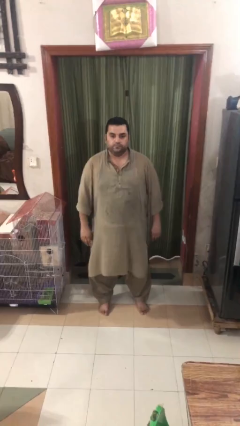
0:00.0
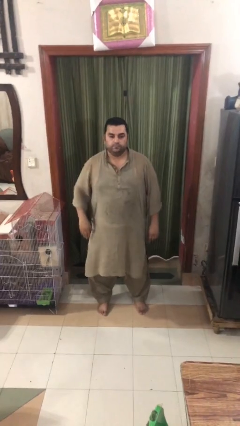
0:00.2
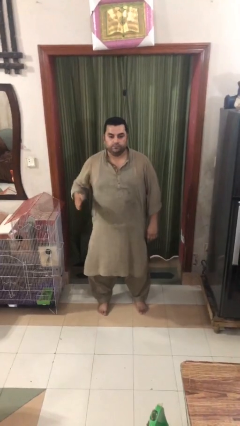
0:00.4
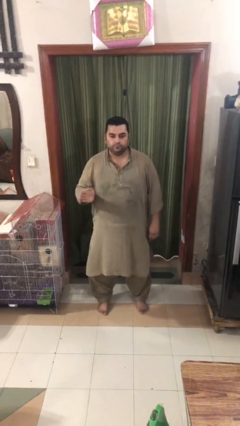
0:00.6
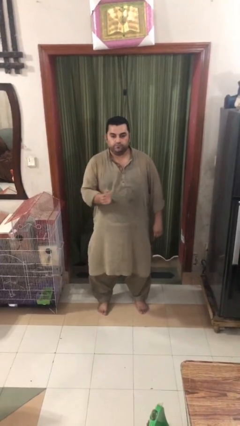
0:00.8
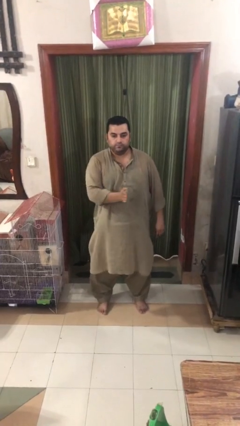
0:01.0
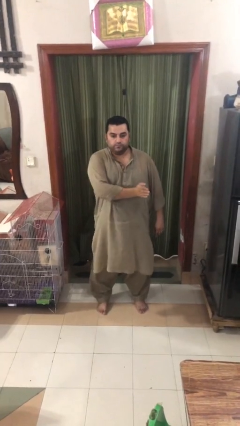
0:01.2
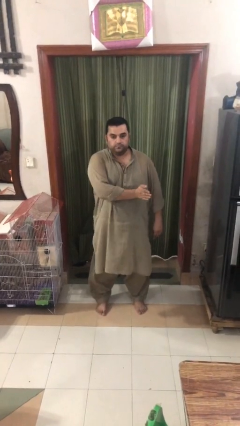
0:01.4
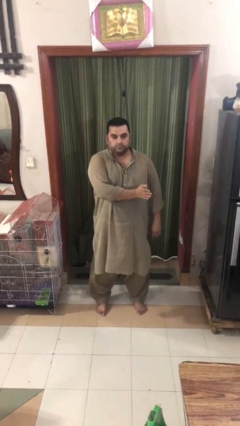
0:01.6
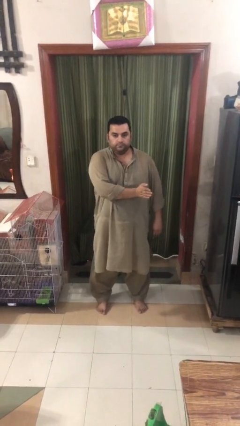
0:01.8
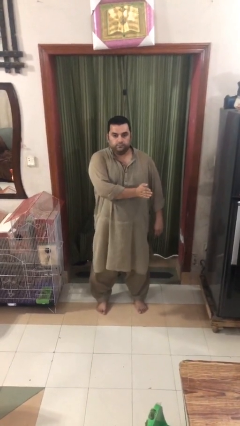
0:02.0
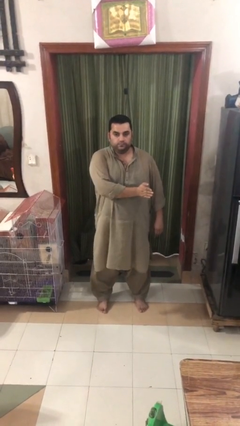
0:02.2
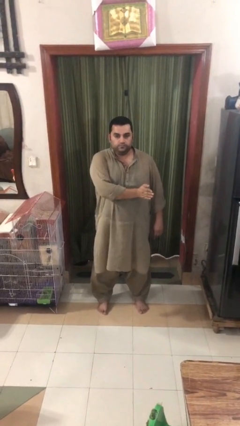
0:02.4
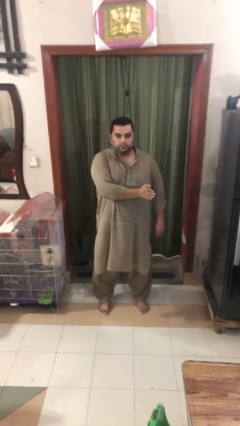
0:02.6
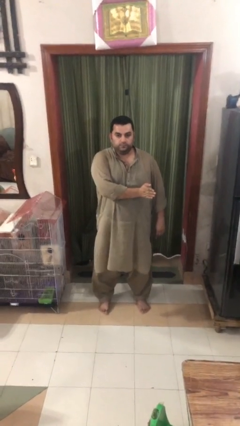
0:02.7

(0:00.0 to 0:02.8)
person gestures swipe left

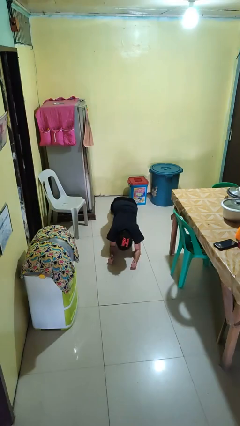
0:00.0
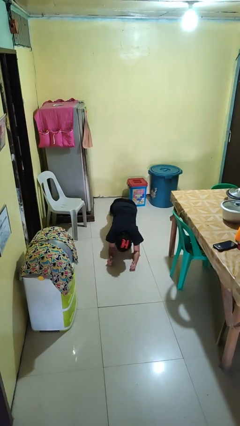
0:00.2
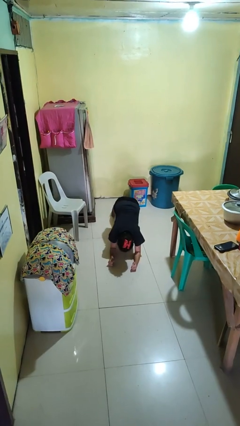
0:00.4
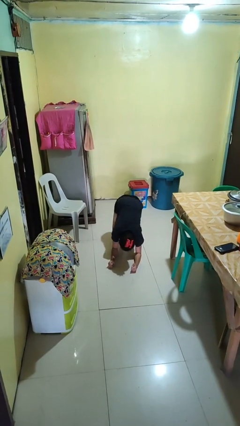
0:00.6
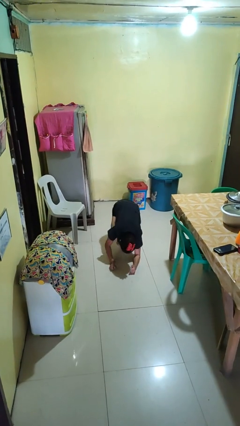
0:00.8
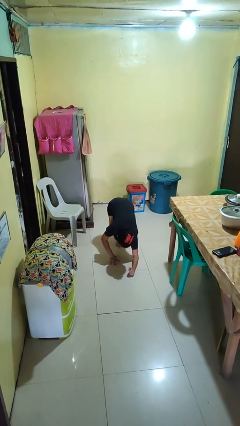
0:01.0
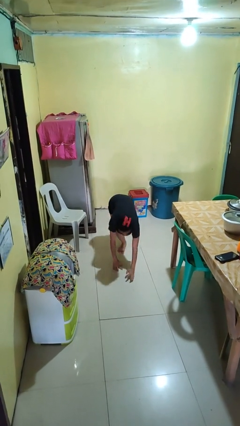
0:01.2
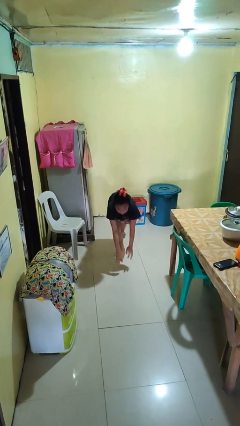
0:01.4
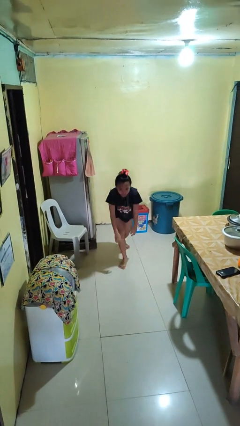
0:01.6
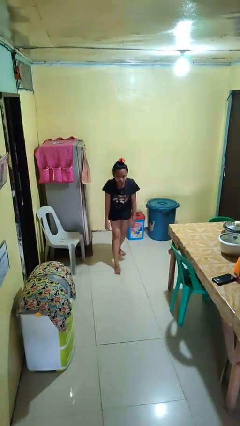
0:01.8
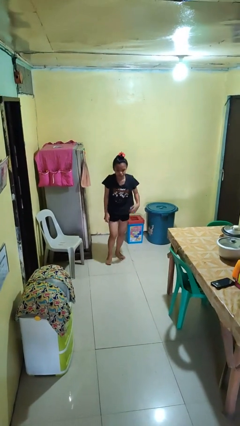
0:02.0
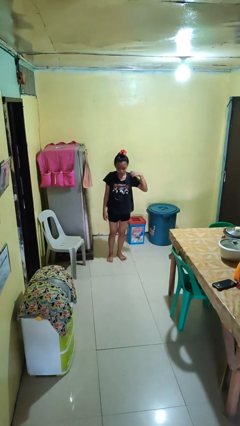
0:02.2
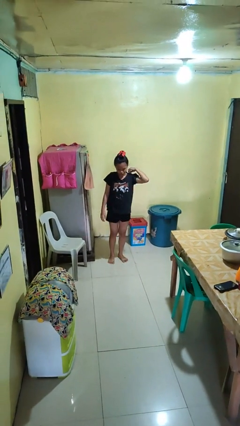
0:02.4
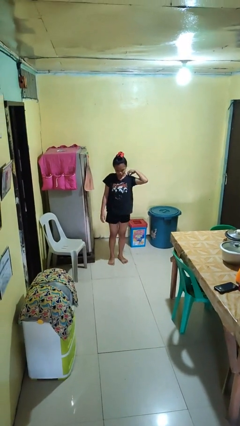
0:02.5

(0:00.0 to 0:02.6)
person stands up from floor

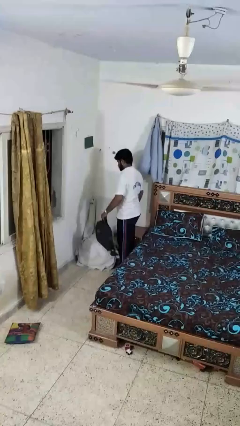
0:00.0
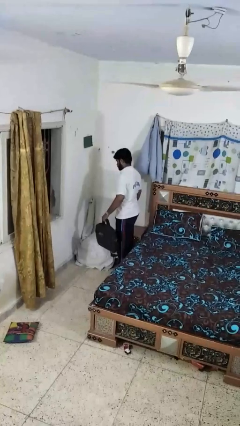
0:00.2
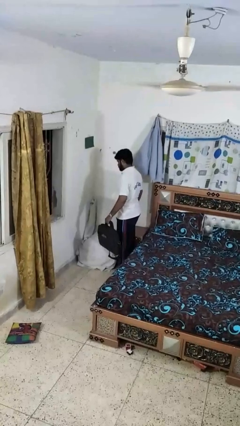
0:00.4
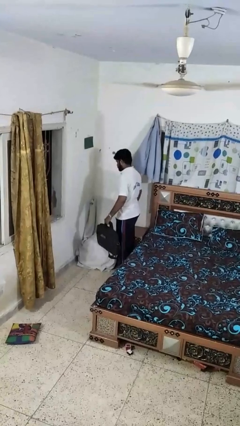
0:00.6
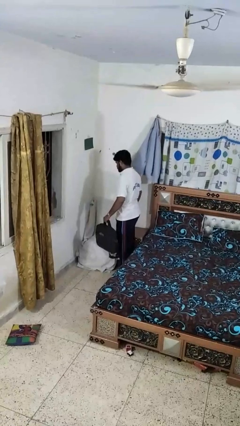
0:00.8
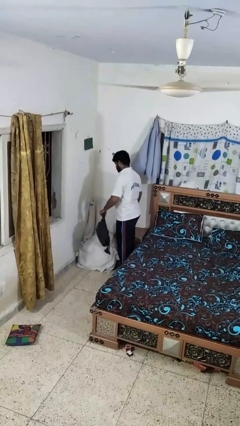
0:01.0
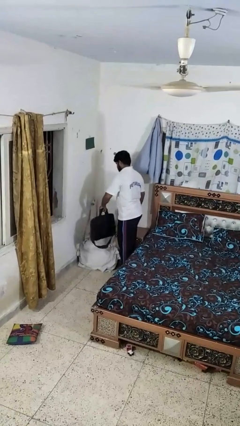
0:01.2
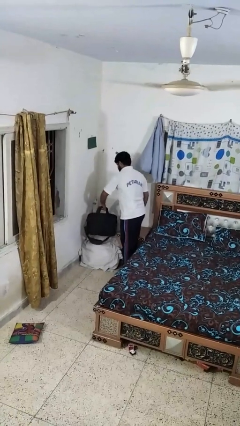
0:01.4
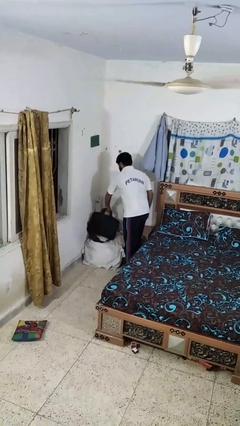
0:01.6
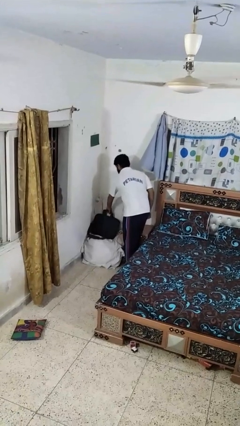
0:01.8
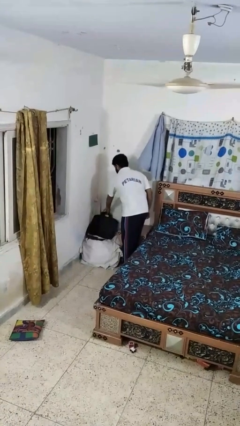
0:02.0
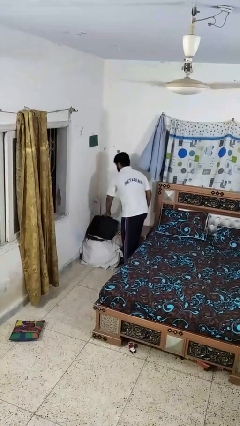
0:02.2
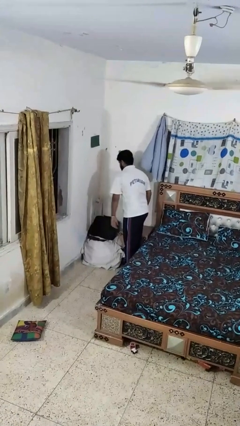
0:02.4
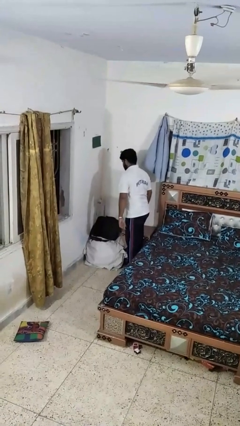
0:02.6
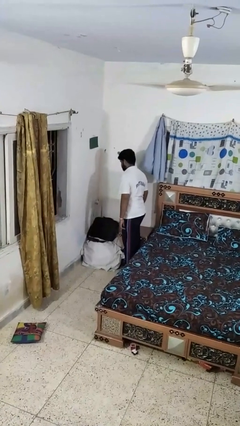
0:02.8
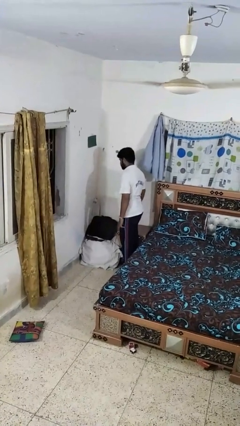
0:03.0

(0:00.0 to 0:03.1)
person puts down object on couch

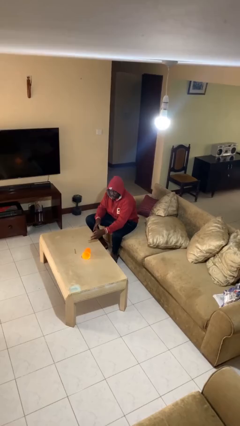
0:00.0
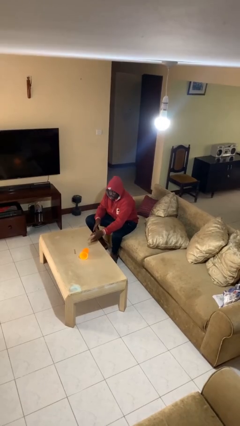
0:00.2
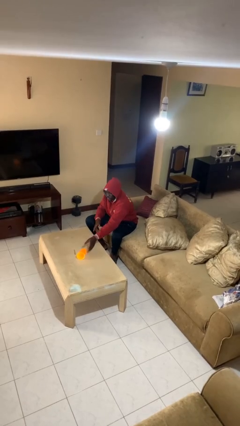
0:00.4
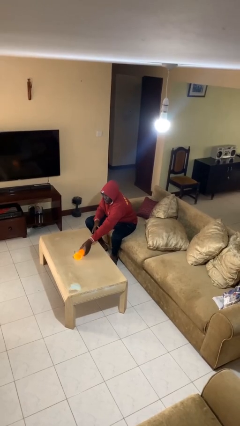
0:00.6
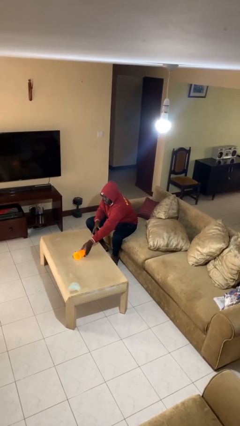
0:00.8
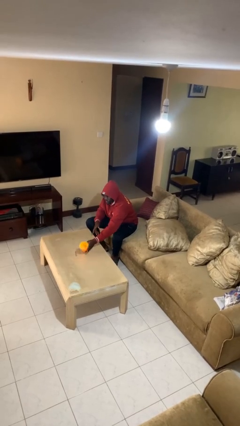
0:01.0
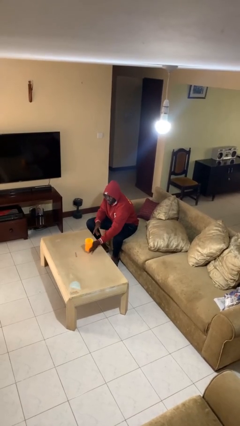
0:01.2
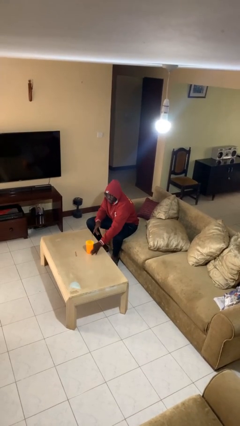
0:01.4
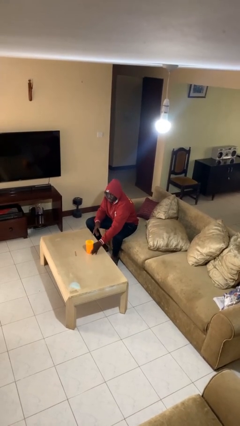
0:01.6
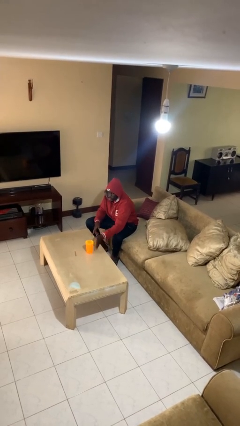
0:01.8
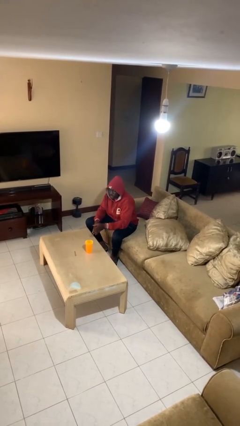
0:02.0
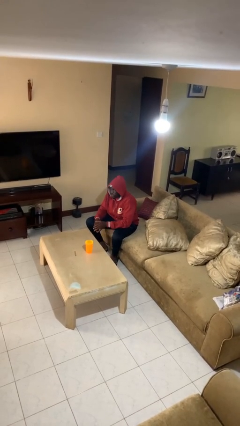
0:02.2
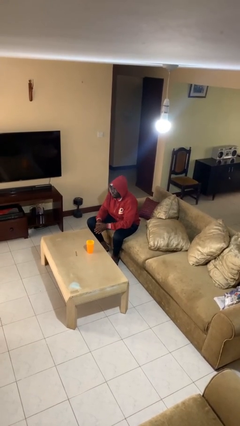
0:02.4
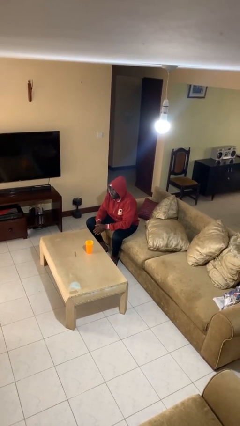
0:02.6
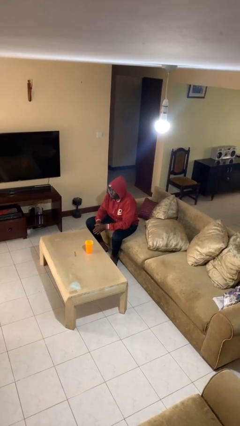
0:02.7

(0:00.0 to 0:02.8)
person sets upright glass

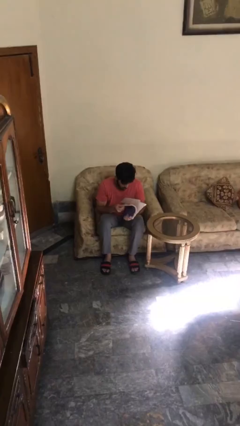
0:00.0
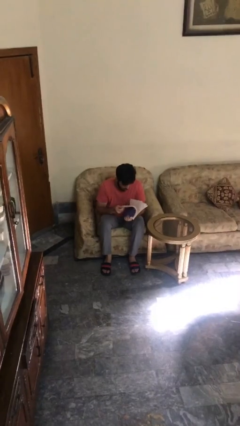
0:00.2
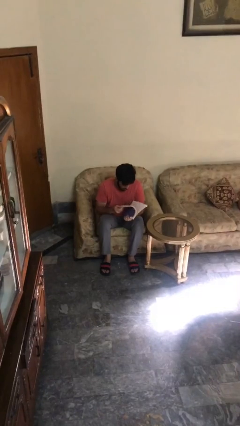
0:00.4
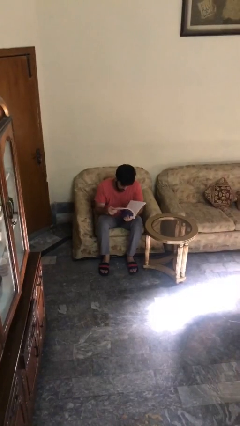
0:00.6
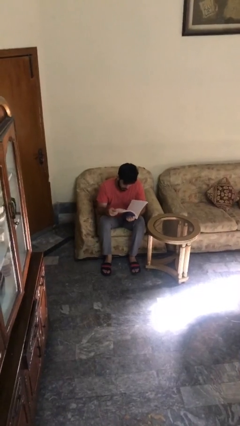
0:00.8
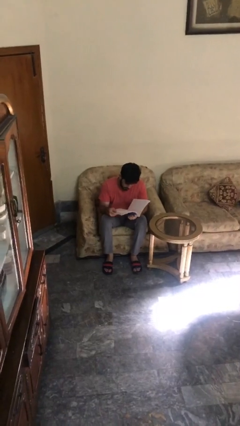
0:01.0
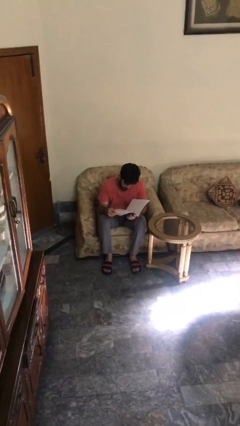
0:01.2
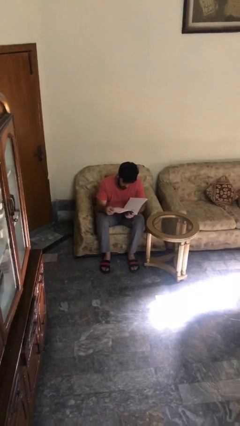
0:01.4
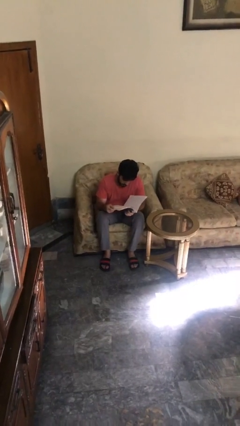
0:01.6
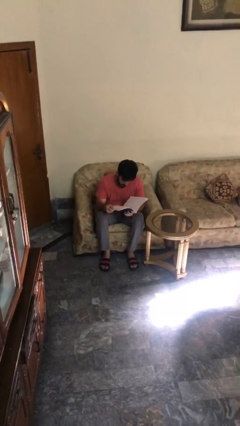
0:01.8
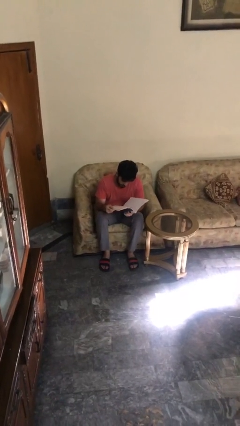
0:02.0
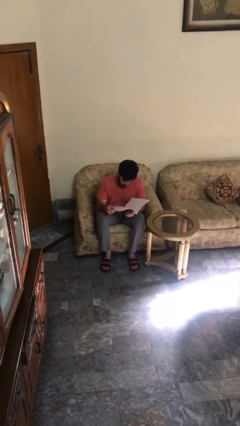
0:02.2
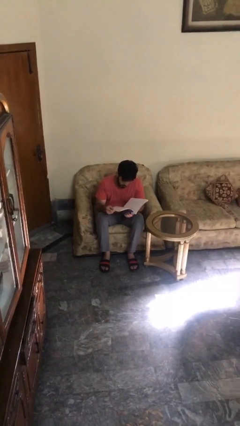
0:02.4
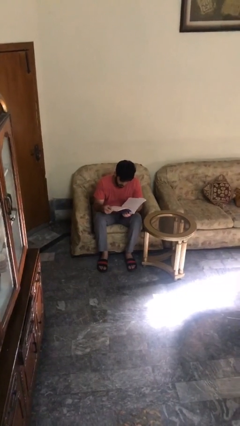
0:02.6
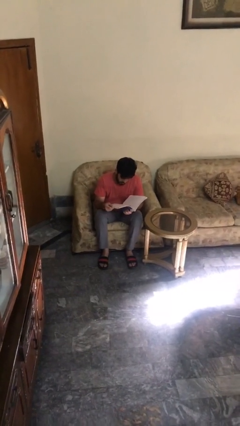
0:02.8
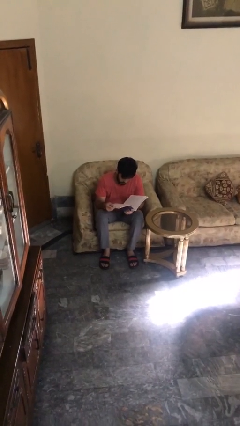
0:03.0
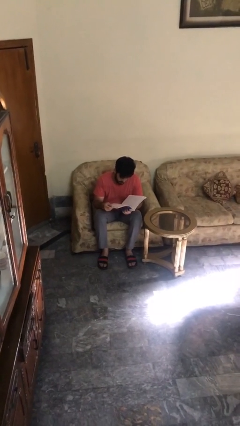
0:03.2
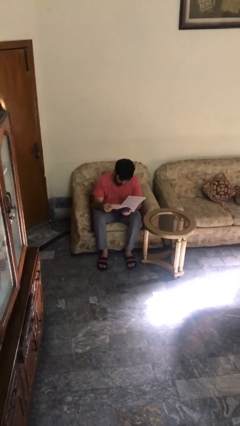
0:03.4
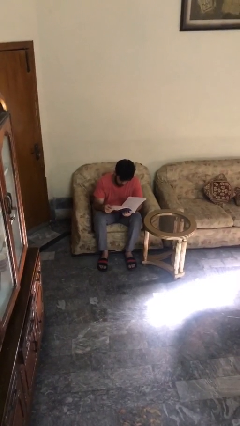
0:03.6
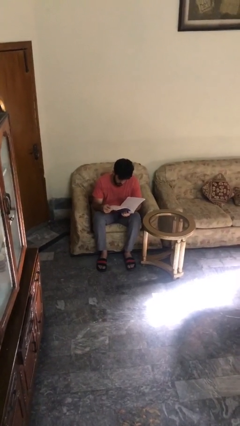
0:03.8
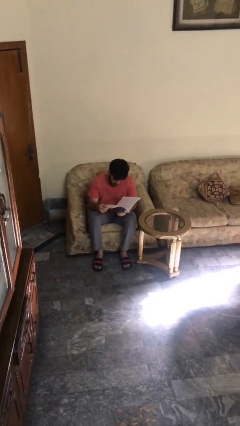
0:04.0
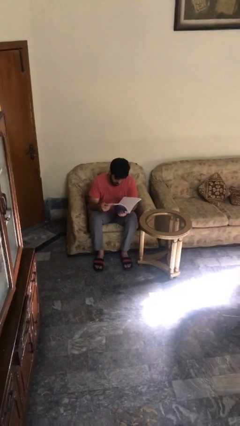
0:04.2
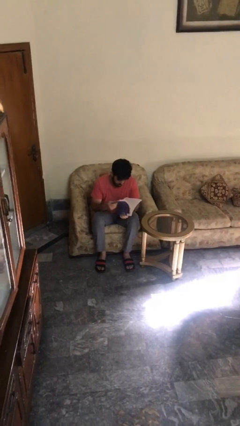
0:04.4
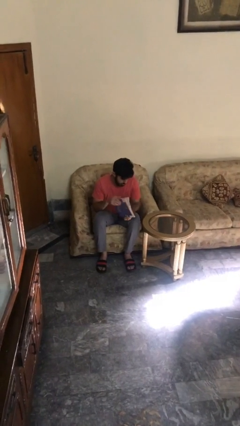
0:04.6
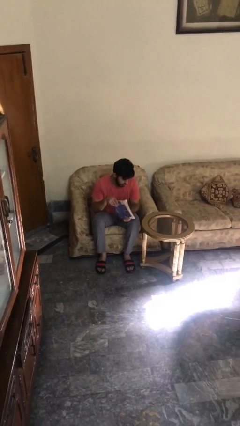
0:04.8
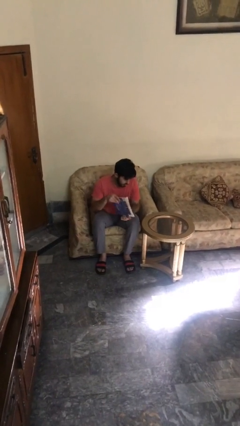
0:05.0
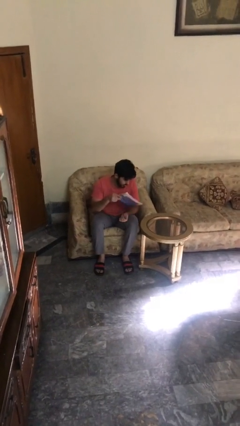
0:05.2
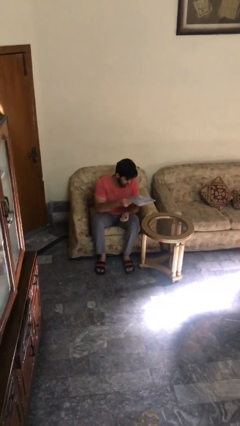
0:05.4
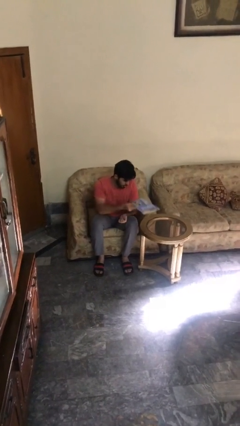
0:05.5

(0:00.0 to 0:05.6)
person reads document

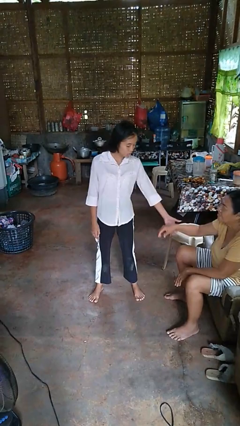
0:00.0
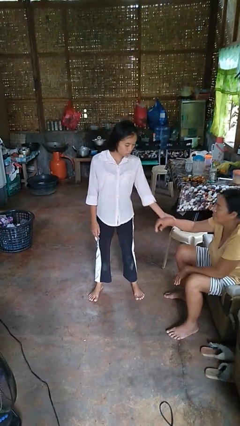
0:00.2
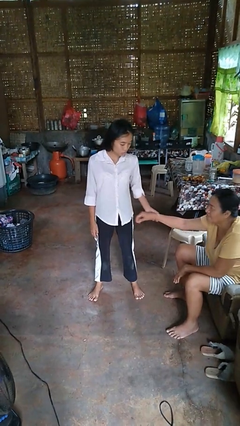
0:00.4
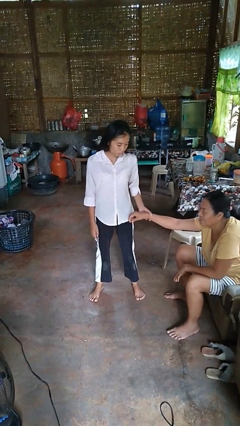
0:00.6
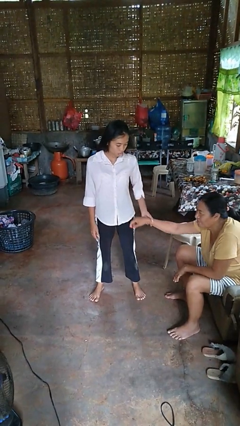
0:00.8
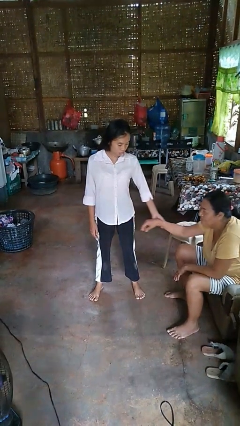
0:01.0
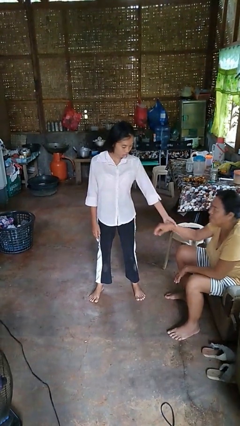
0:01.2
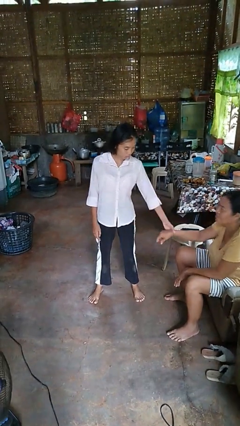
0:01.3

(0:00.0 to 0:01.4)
person grabs person by forearm
